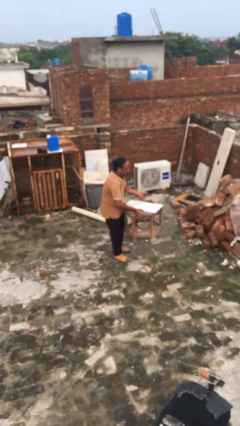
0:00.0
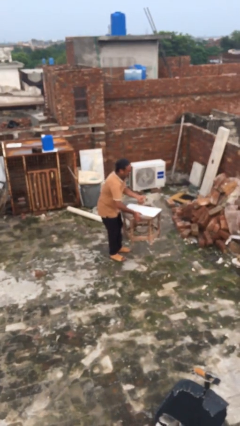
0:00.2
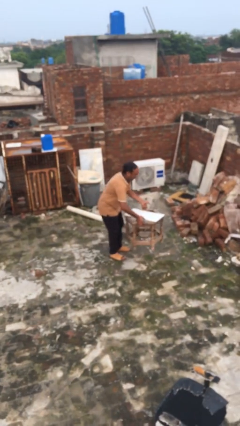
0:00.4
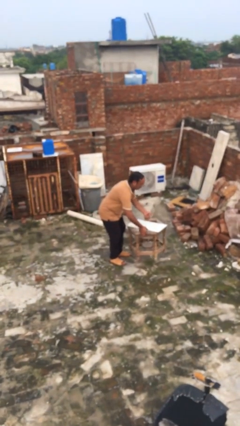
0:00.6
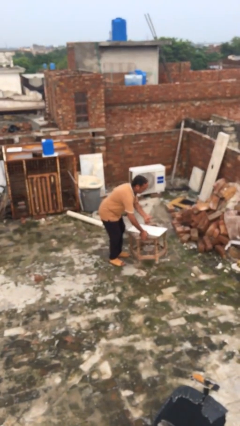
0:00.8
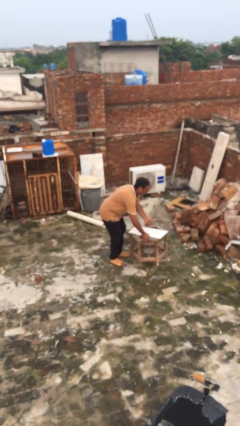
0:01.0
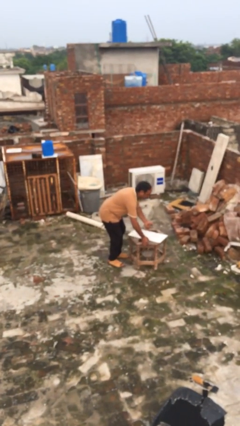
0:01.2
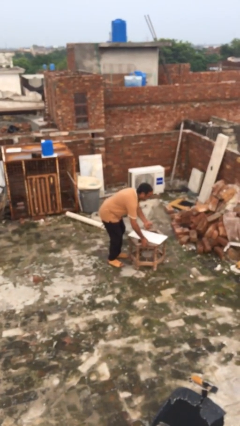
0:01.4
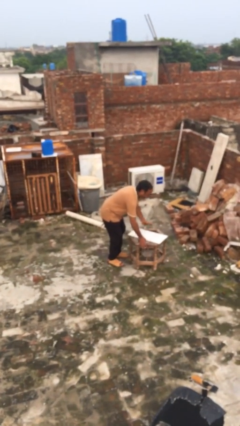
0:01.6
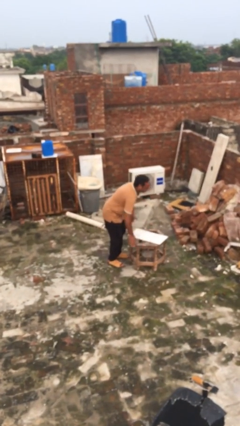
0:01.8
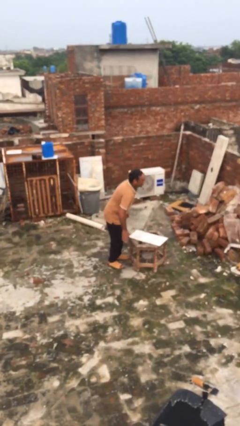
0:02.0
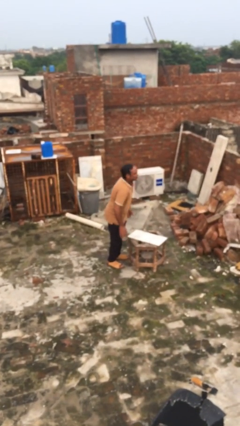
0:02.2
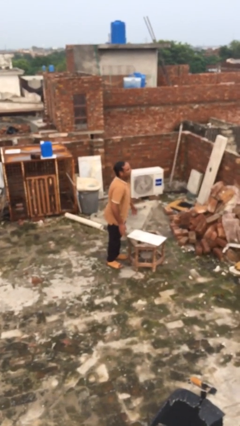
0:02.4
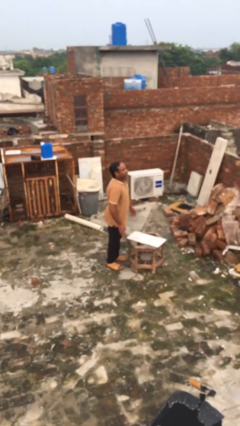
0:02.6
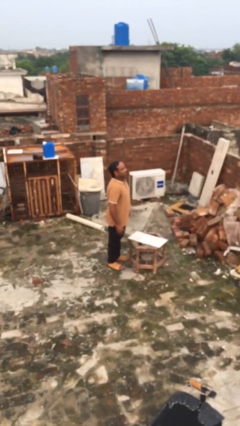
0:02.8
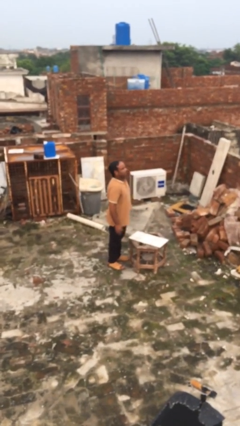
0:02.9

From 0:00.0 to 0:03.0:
person puts down object on floor

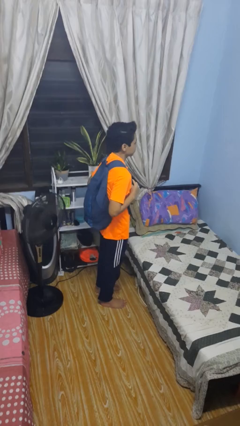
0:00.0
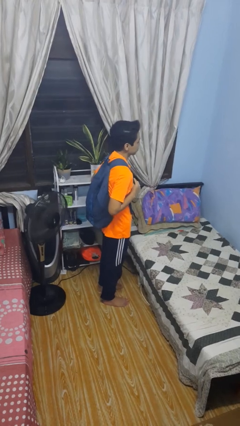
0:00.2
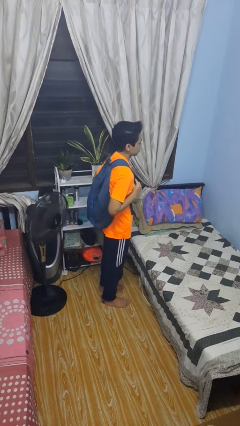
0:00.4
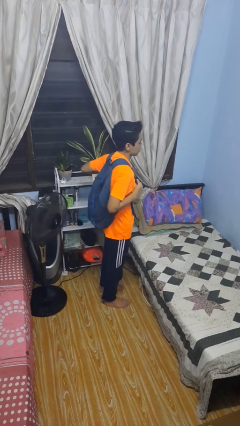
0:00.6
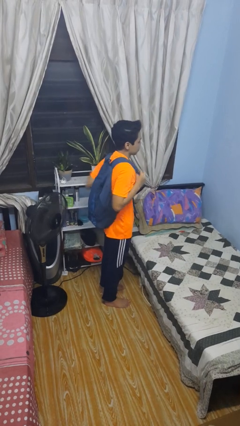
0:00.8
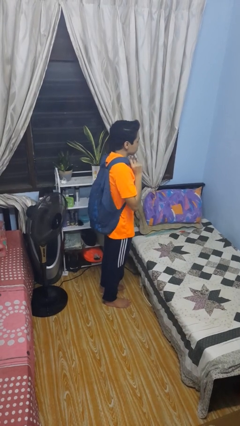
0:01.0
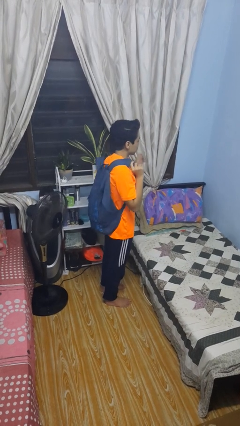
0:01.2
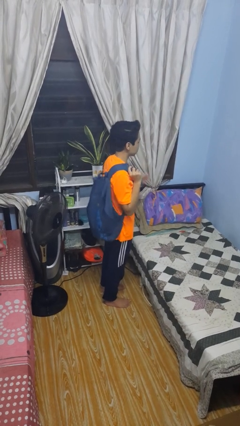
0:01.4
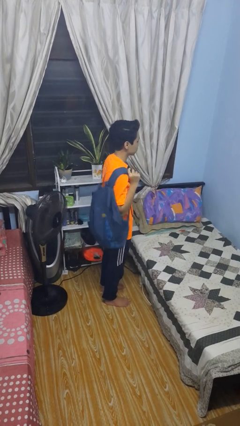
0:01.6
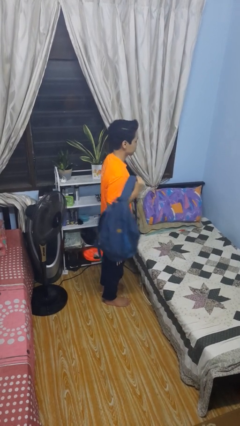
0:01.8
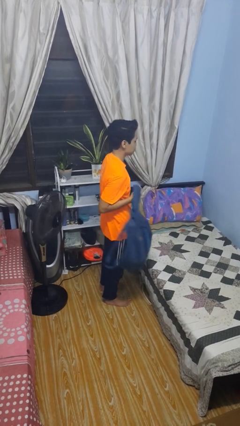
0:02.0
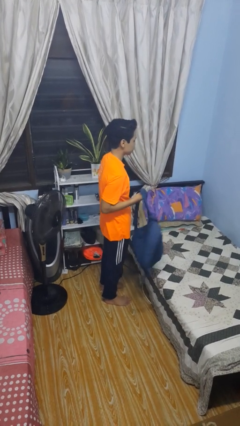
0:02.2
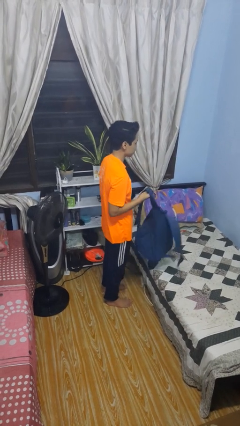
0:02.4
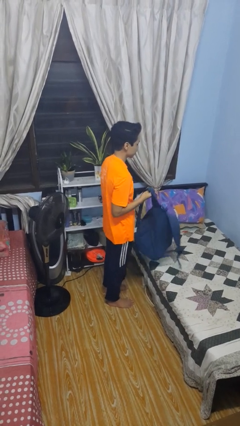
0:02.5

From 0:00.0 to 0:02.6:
person takes off backpack

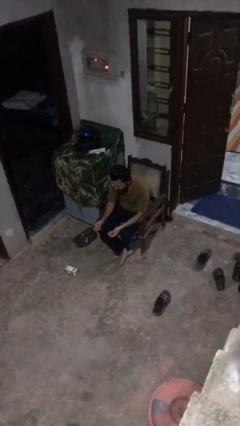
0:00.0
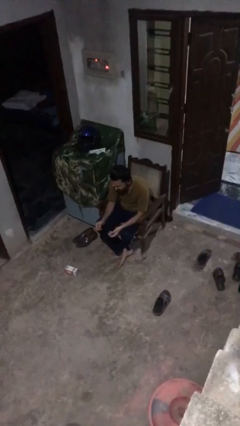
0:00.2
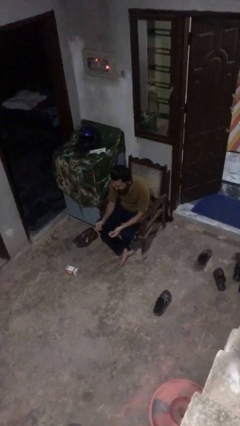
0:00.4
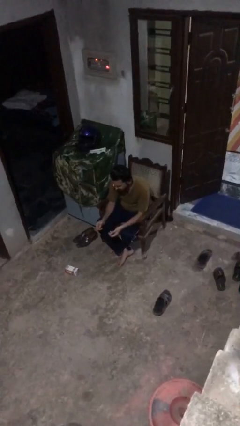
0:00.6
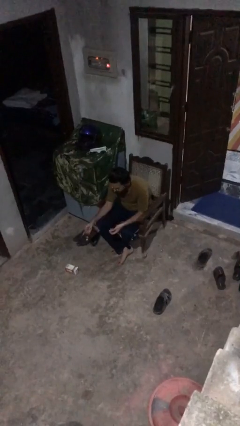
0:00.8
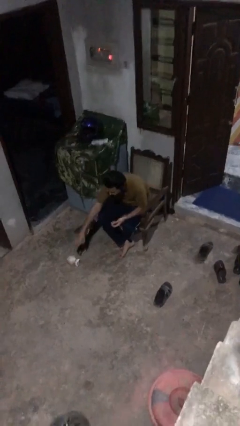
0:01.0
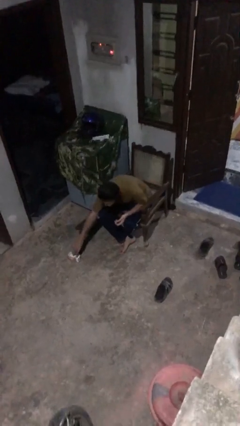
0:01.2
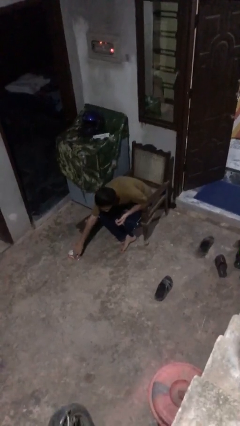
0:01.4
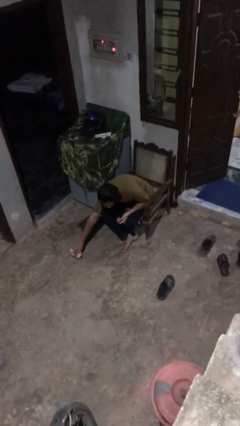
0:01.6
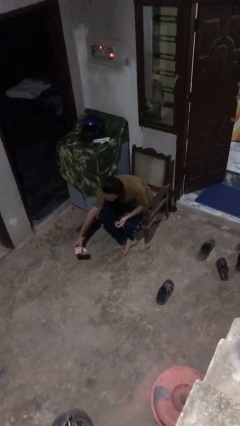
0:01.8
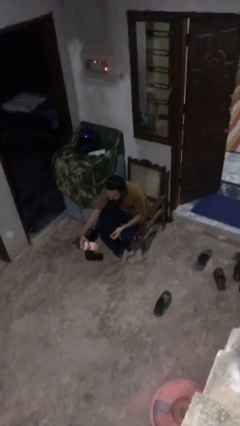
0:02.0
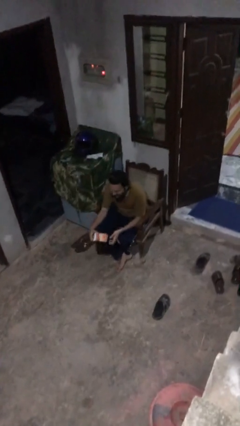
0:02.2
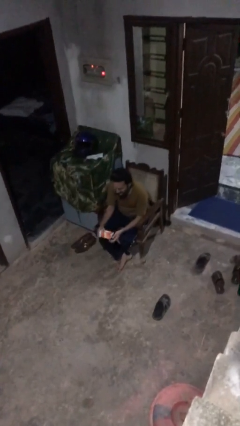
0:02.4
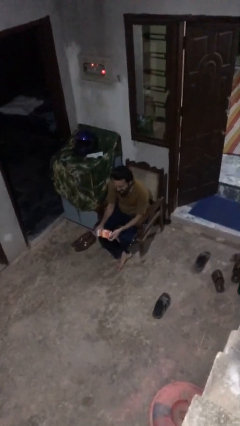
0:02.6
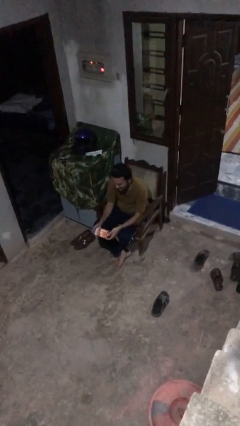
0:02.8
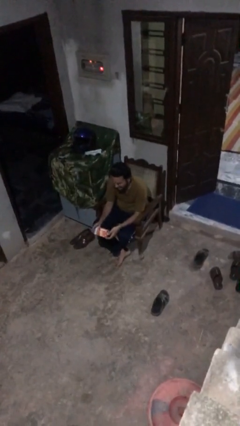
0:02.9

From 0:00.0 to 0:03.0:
person picks up object from floor

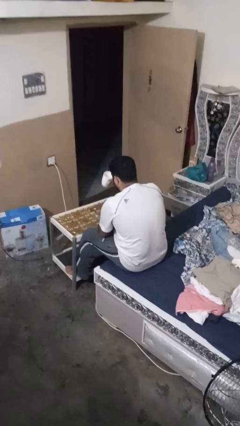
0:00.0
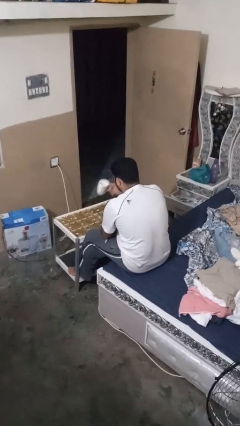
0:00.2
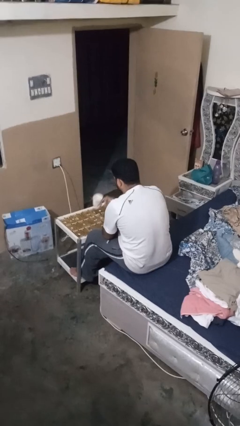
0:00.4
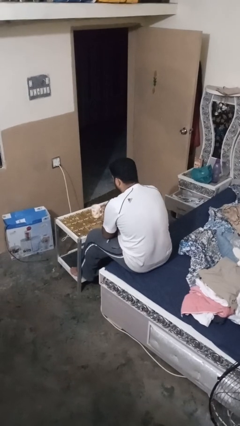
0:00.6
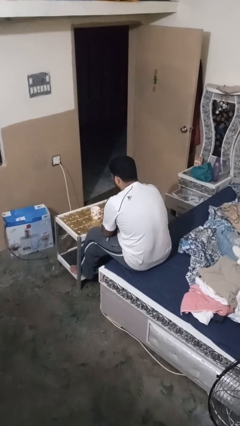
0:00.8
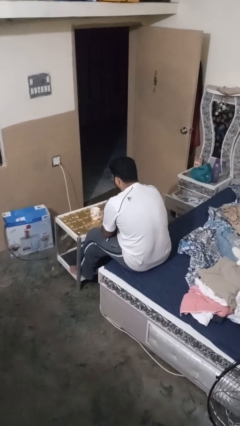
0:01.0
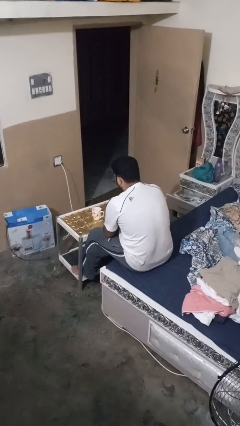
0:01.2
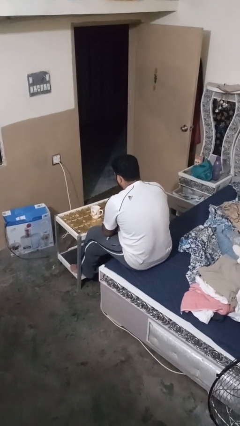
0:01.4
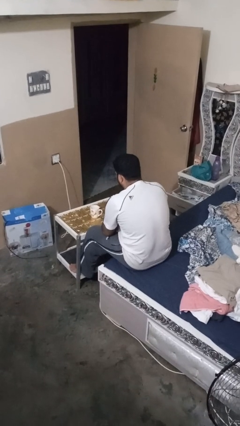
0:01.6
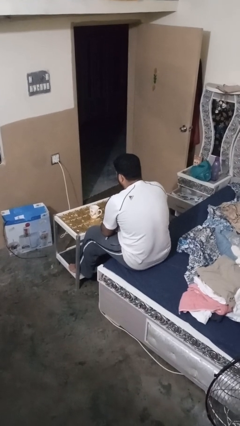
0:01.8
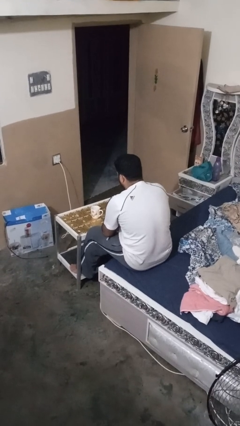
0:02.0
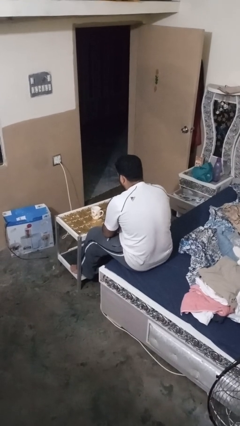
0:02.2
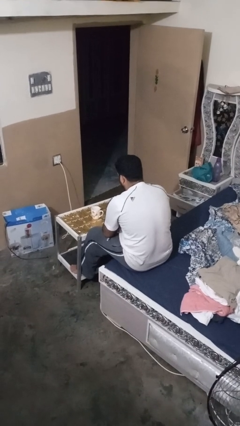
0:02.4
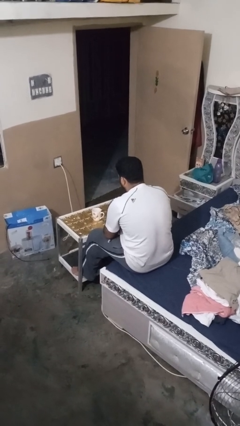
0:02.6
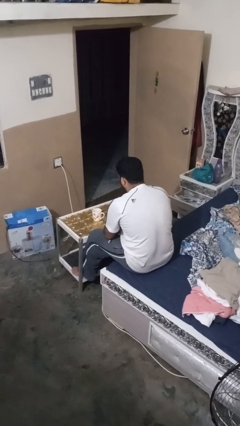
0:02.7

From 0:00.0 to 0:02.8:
person puts down object on table

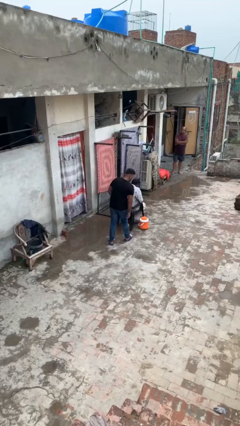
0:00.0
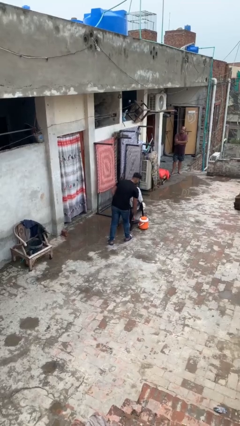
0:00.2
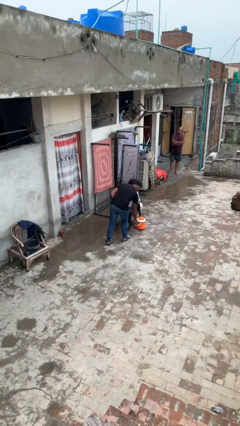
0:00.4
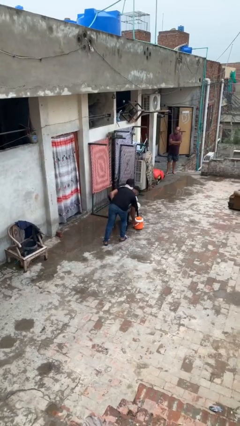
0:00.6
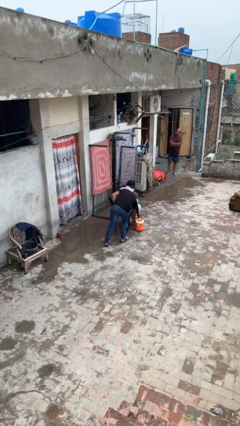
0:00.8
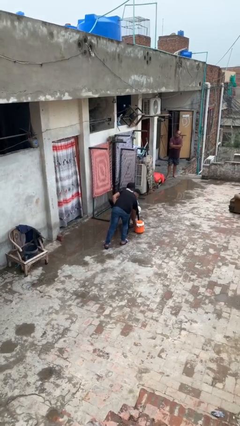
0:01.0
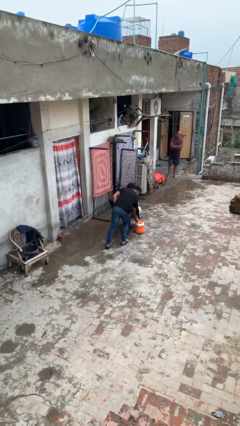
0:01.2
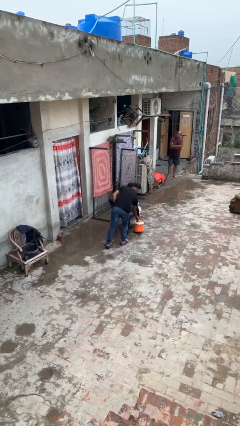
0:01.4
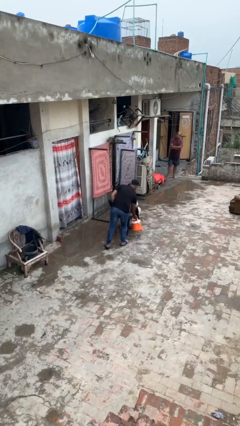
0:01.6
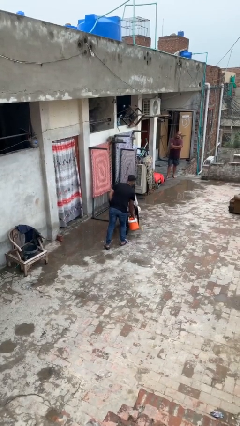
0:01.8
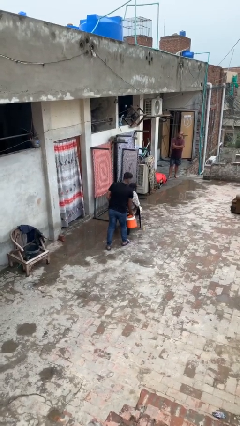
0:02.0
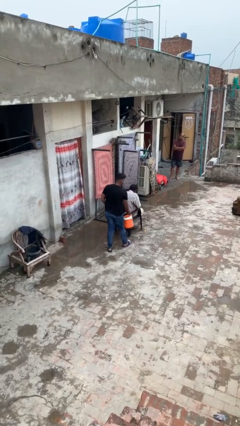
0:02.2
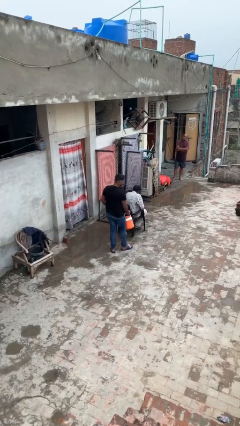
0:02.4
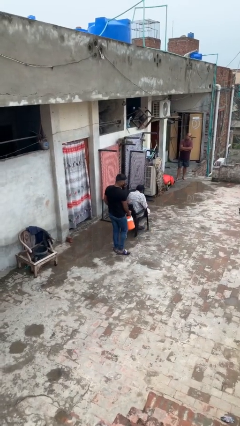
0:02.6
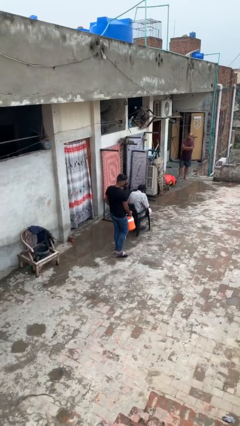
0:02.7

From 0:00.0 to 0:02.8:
person steals object from person

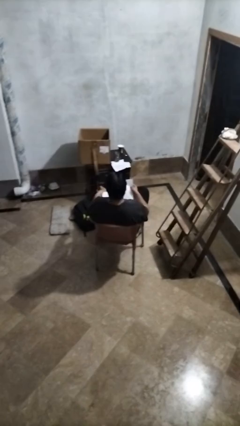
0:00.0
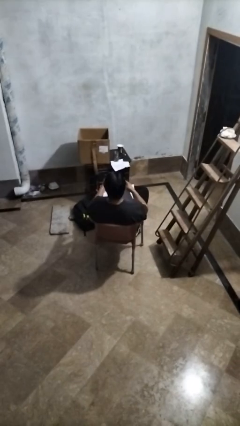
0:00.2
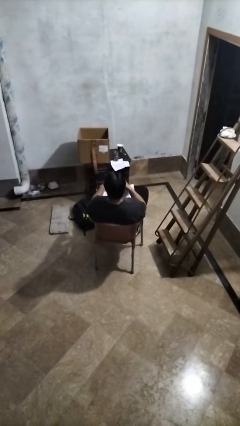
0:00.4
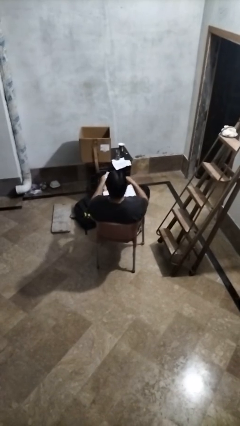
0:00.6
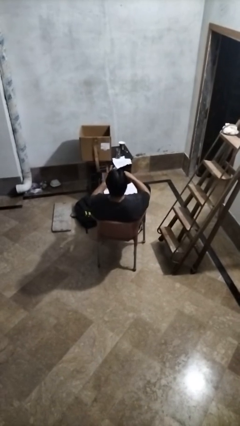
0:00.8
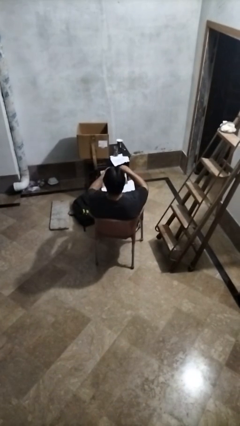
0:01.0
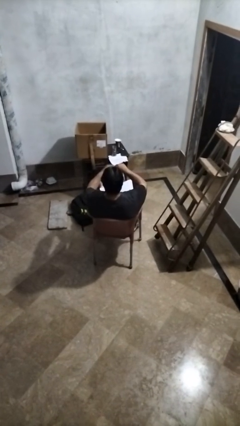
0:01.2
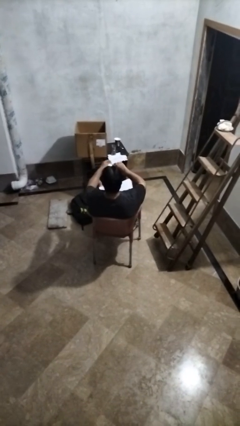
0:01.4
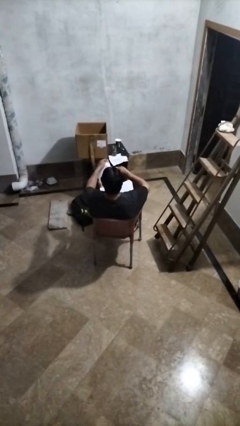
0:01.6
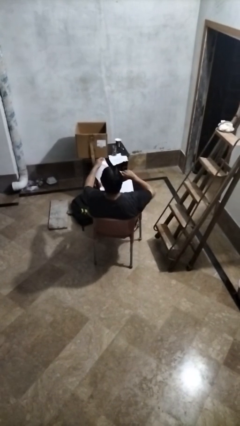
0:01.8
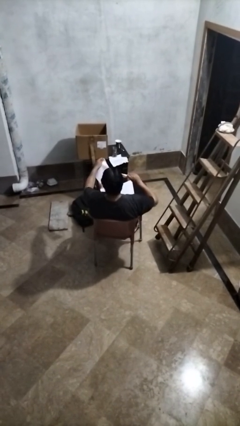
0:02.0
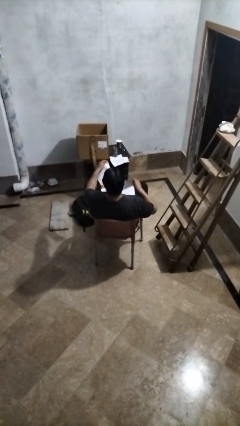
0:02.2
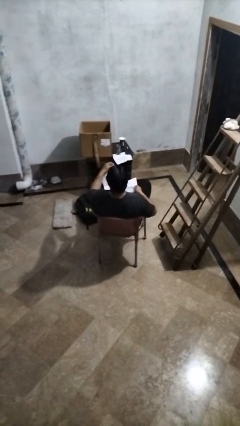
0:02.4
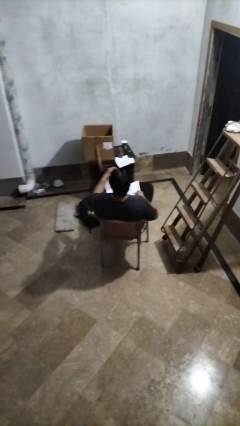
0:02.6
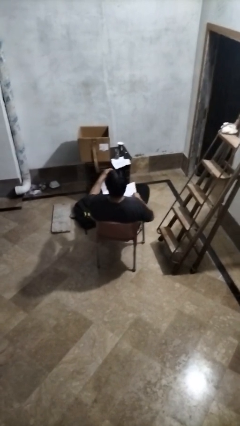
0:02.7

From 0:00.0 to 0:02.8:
person tears paper
